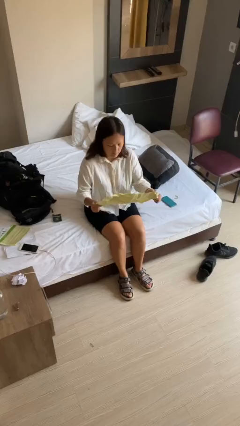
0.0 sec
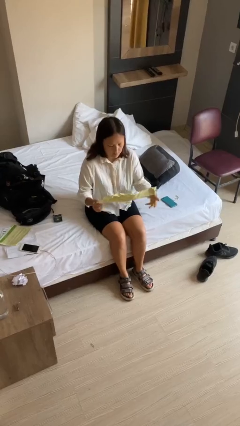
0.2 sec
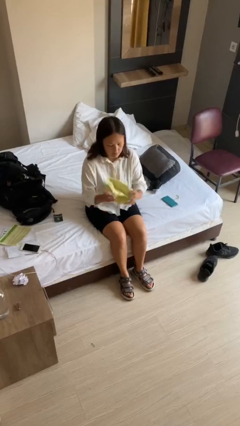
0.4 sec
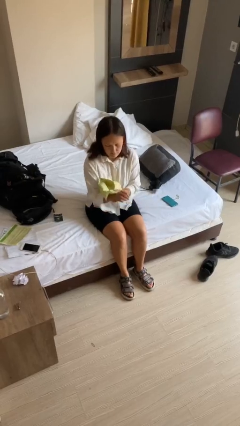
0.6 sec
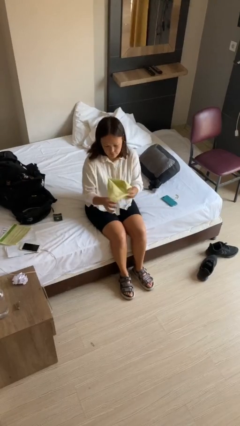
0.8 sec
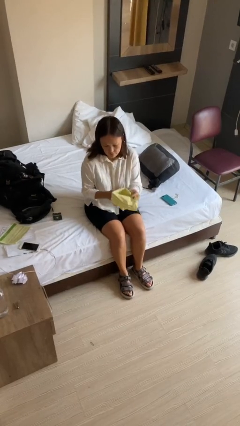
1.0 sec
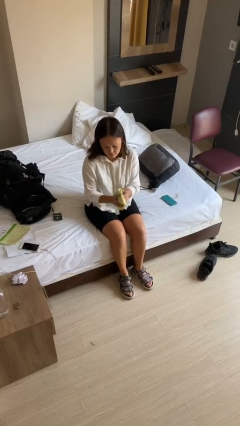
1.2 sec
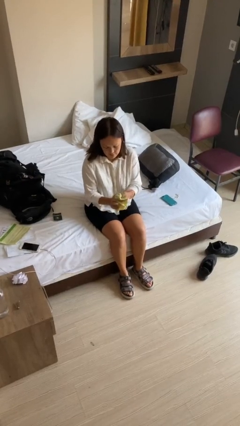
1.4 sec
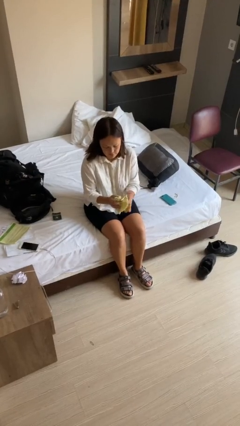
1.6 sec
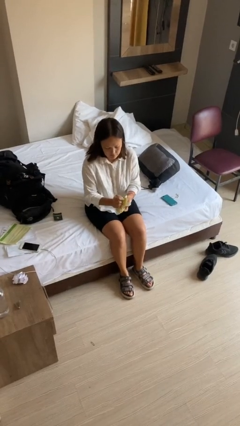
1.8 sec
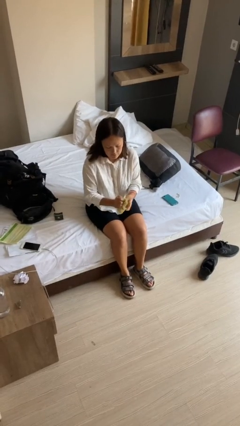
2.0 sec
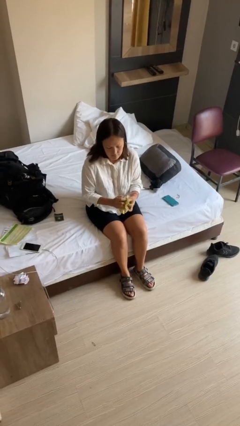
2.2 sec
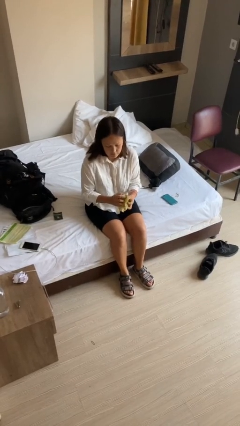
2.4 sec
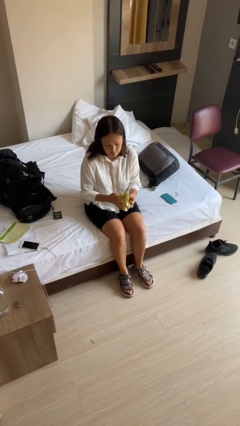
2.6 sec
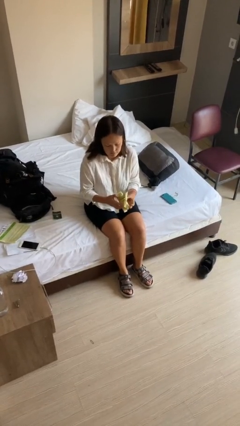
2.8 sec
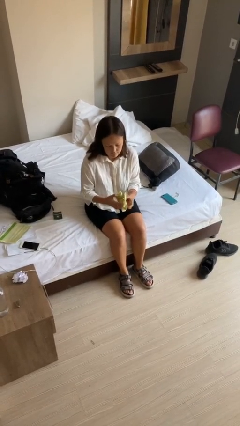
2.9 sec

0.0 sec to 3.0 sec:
person crumples paper

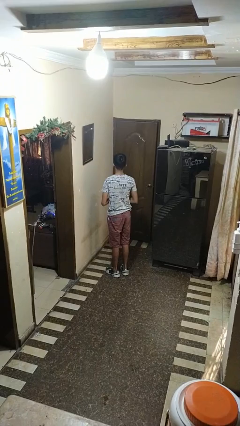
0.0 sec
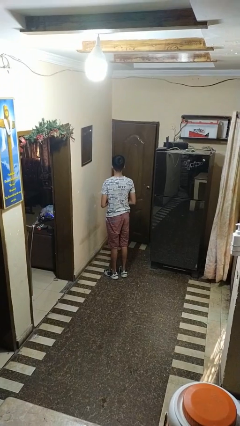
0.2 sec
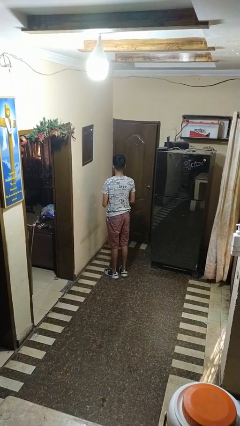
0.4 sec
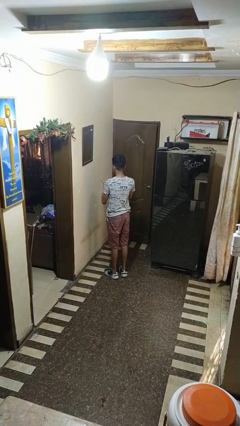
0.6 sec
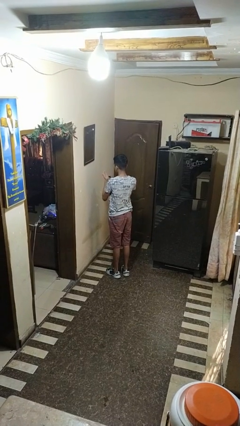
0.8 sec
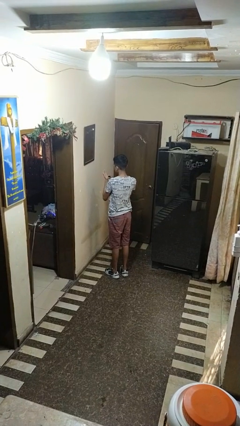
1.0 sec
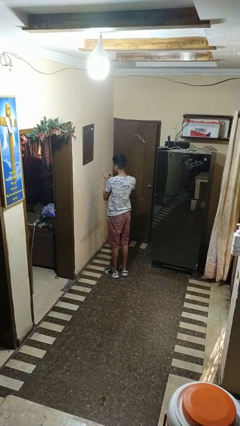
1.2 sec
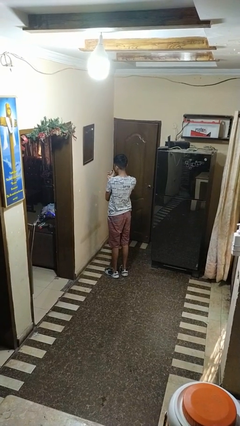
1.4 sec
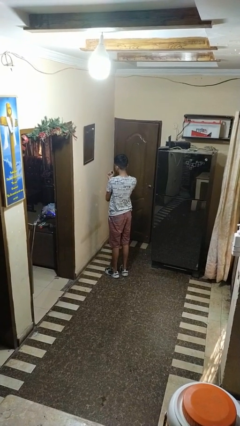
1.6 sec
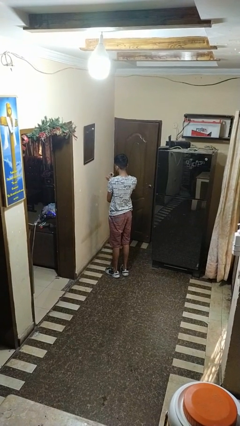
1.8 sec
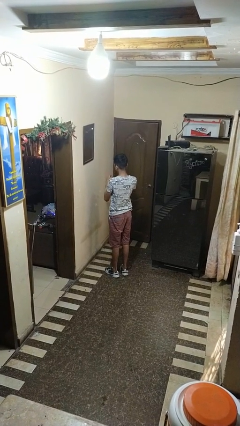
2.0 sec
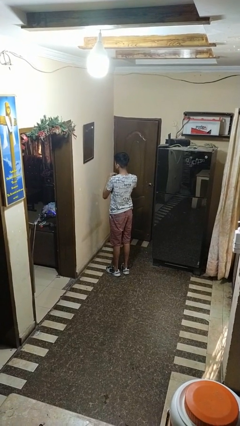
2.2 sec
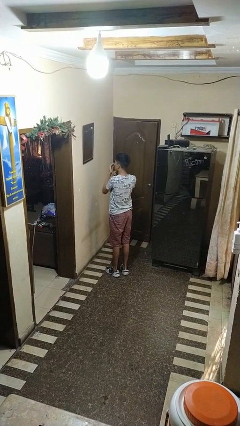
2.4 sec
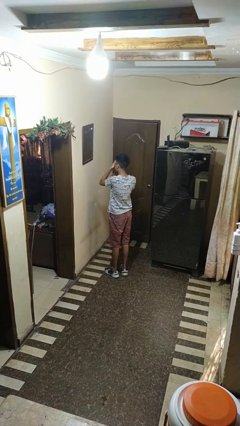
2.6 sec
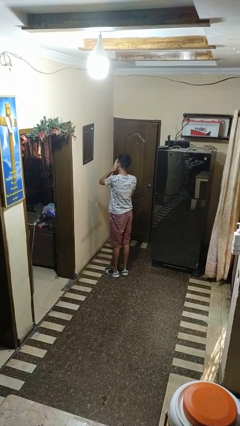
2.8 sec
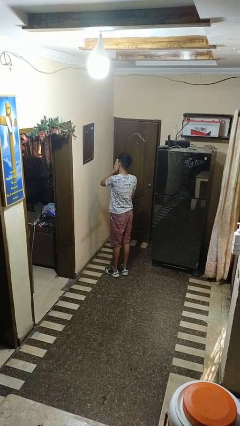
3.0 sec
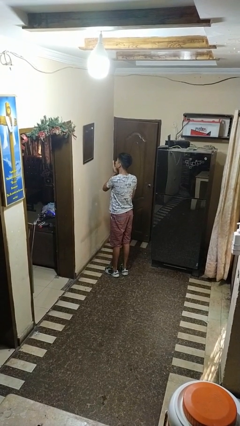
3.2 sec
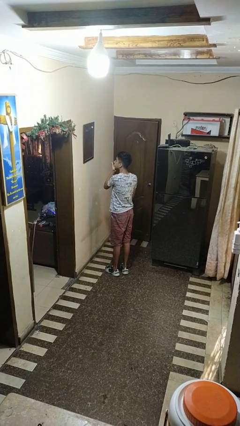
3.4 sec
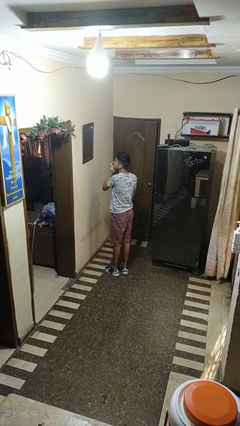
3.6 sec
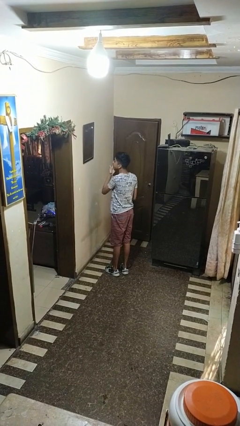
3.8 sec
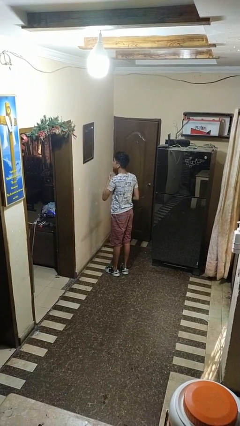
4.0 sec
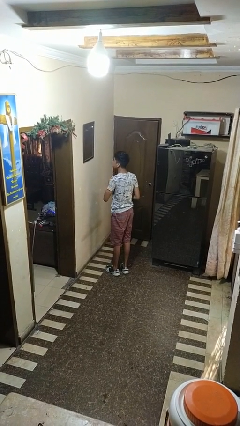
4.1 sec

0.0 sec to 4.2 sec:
person applies foundation makeup

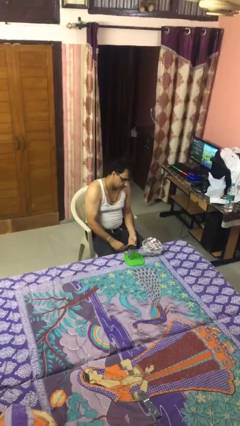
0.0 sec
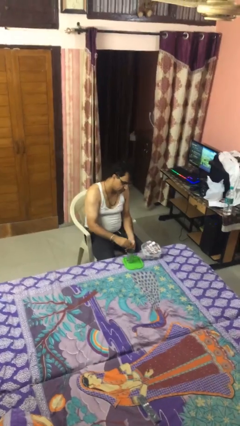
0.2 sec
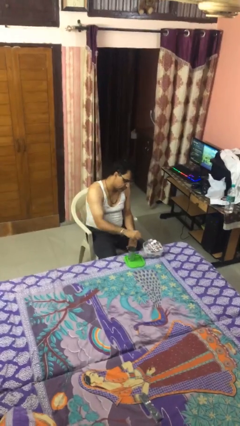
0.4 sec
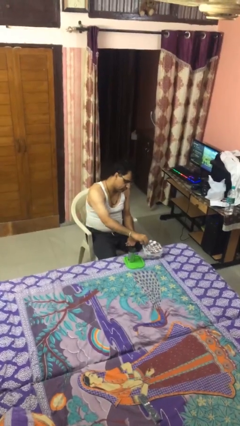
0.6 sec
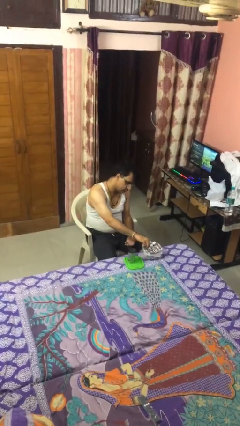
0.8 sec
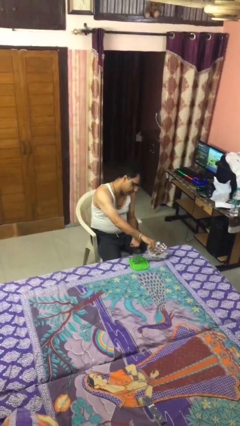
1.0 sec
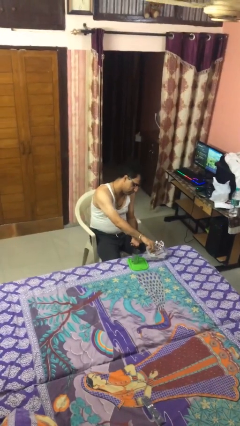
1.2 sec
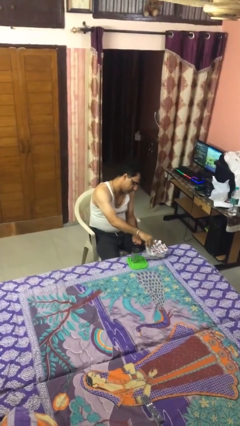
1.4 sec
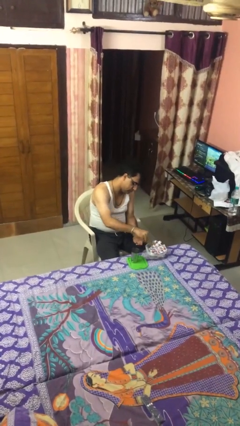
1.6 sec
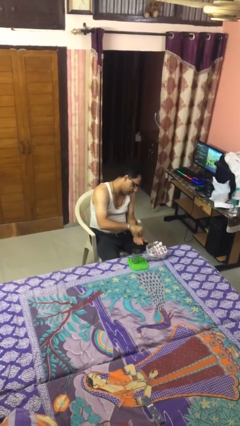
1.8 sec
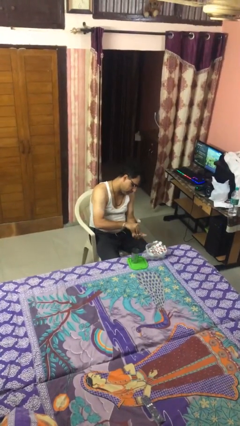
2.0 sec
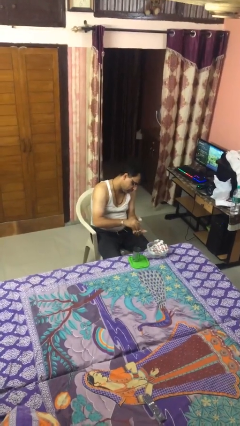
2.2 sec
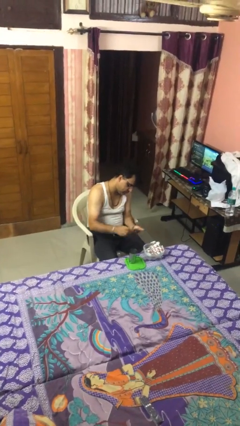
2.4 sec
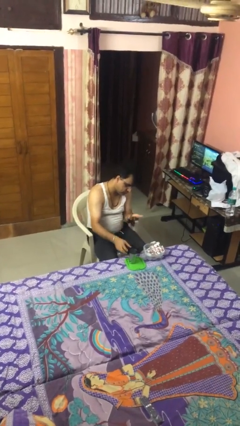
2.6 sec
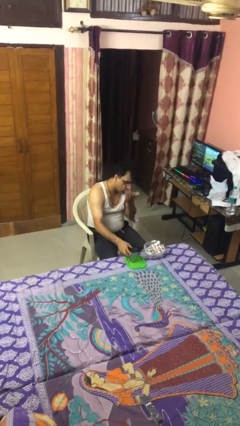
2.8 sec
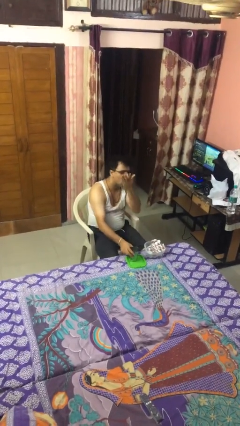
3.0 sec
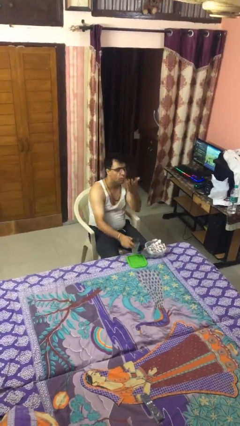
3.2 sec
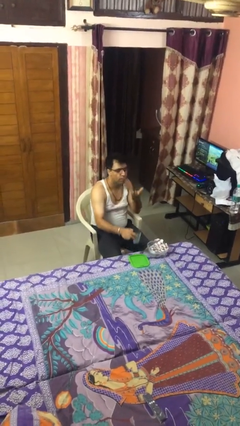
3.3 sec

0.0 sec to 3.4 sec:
person takes medicine pills

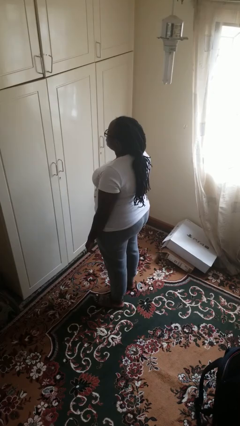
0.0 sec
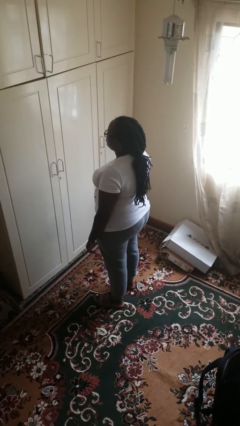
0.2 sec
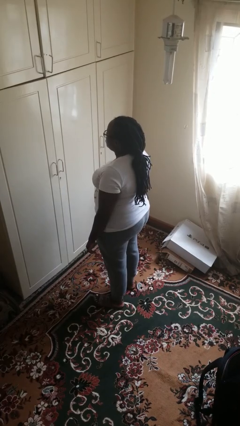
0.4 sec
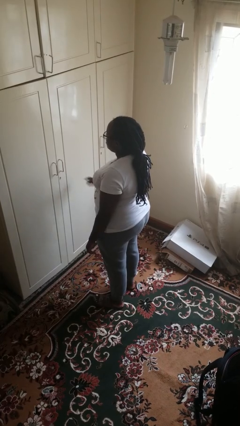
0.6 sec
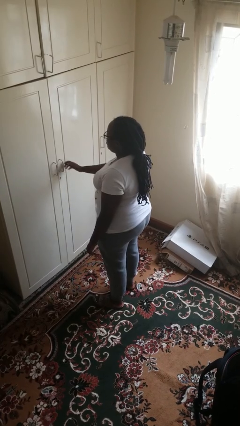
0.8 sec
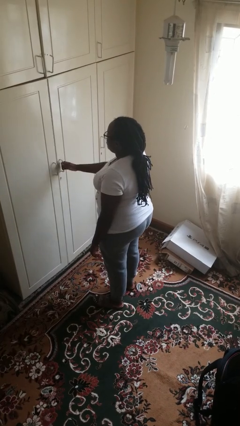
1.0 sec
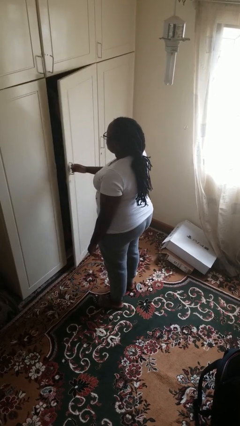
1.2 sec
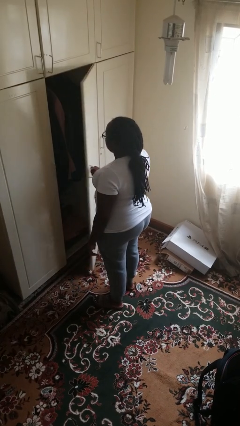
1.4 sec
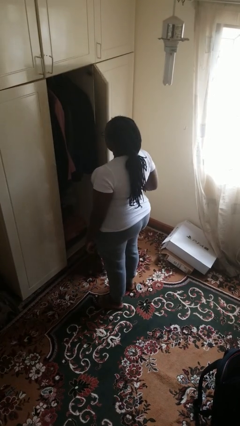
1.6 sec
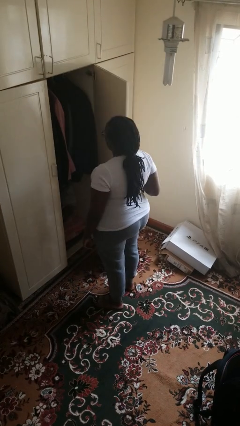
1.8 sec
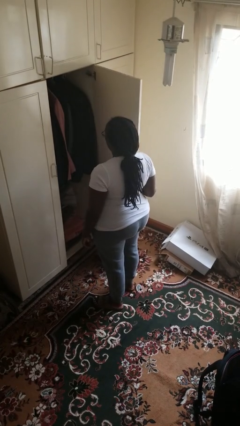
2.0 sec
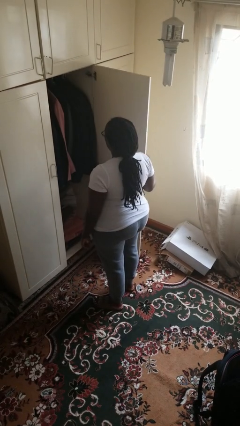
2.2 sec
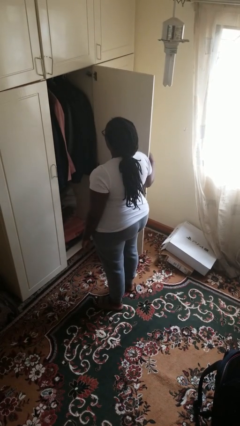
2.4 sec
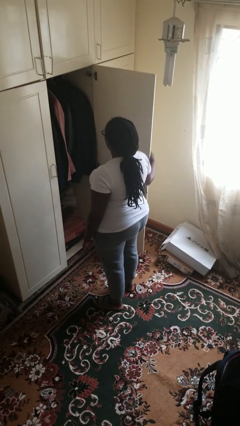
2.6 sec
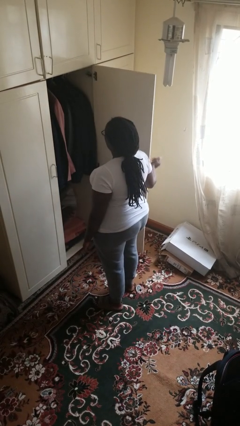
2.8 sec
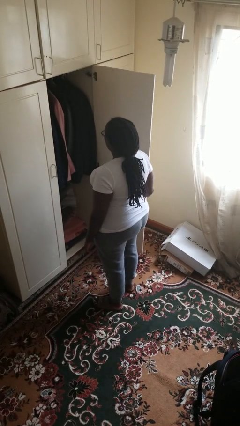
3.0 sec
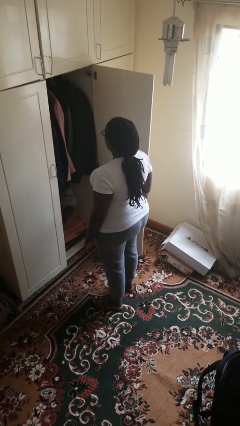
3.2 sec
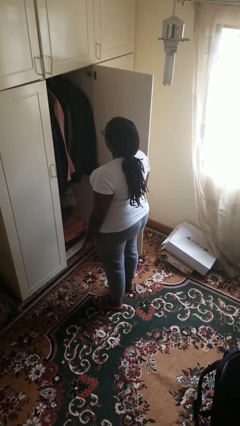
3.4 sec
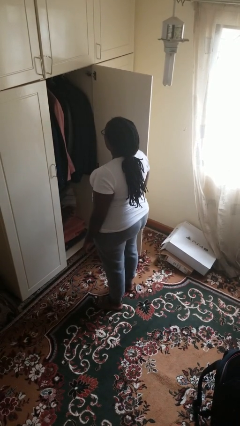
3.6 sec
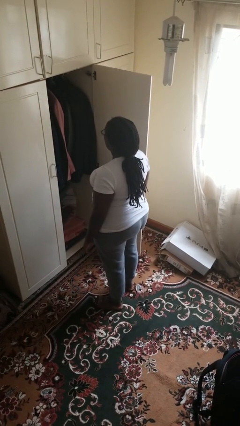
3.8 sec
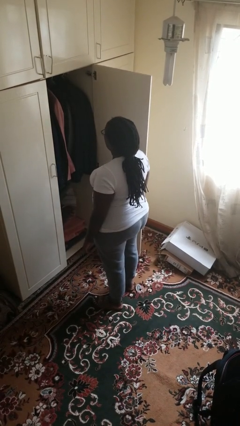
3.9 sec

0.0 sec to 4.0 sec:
person opens closet door

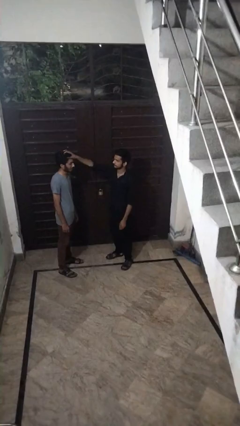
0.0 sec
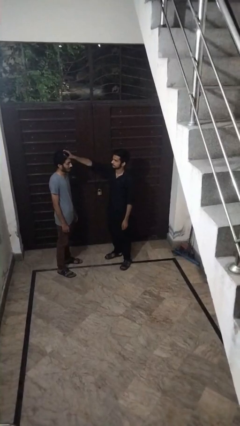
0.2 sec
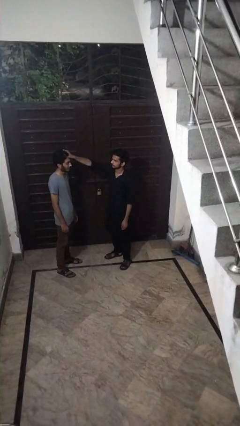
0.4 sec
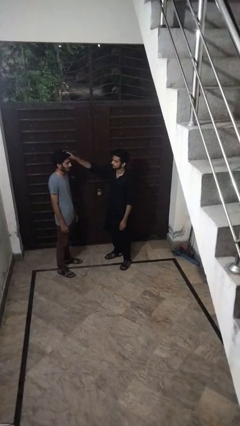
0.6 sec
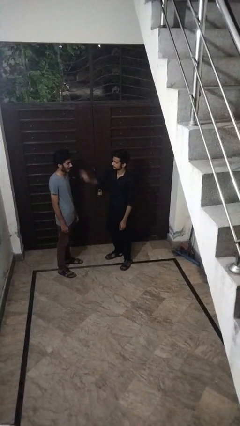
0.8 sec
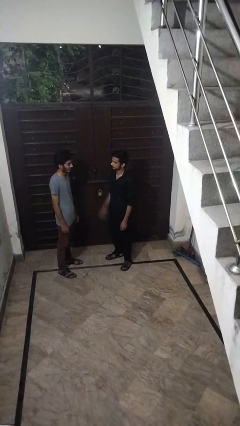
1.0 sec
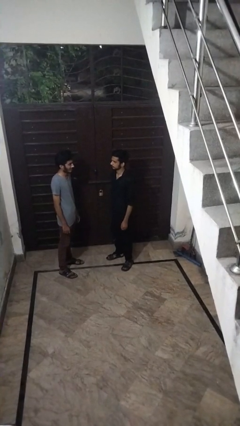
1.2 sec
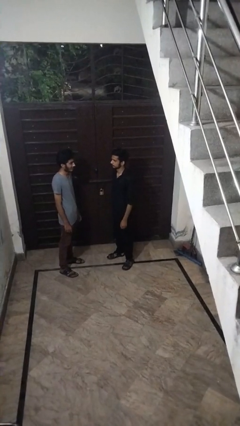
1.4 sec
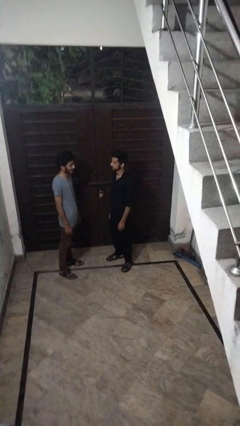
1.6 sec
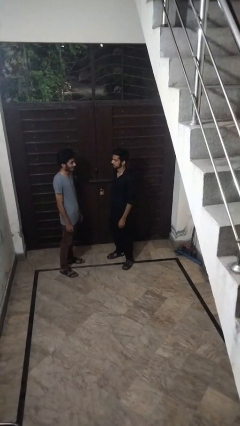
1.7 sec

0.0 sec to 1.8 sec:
person grabs person by hair

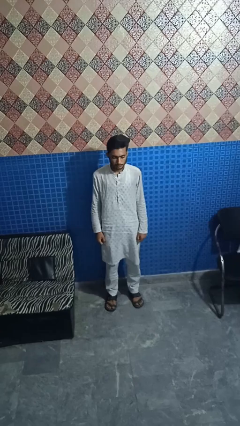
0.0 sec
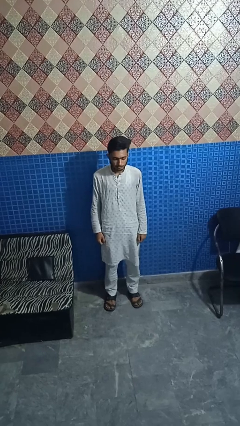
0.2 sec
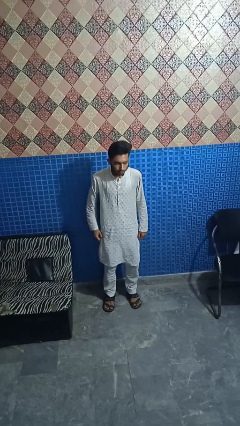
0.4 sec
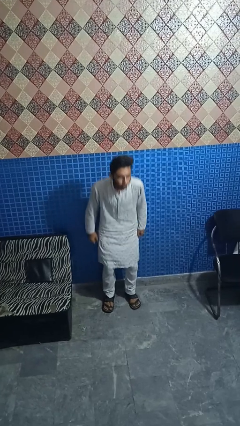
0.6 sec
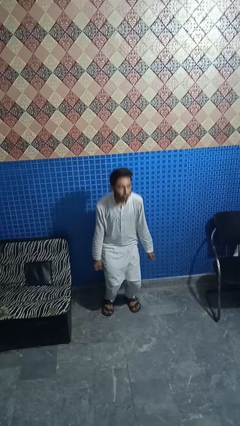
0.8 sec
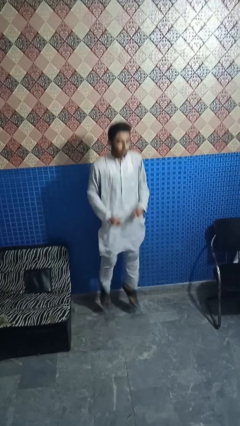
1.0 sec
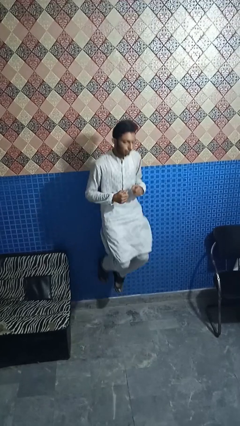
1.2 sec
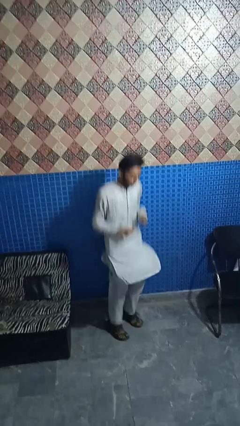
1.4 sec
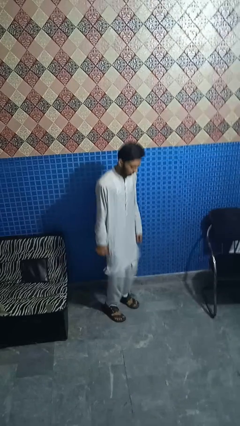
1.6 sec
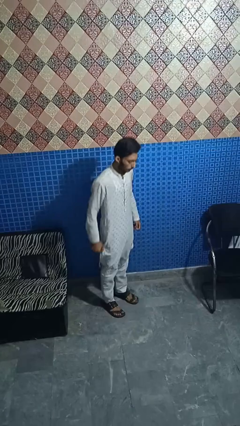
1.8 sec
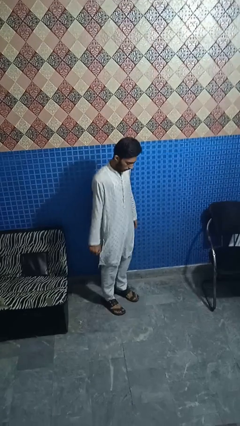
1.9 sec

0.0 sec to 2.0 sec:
person jumps
